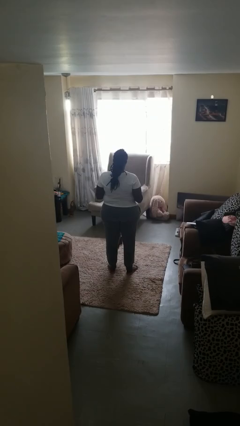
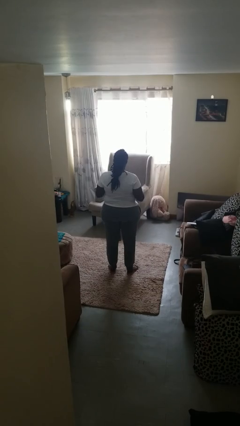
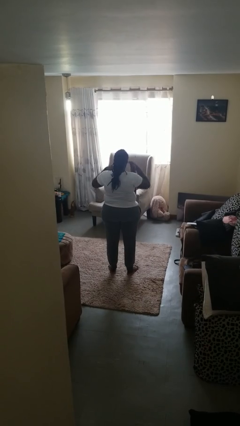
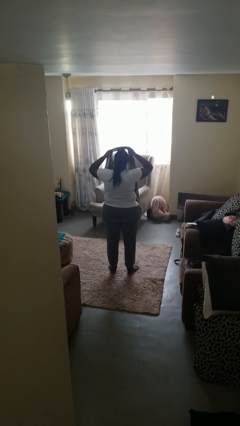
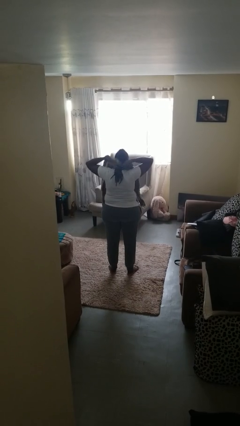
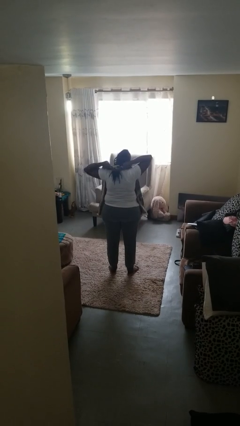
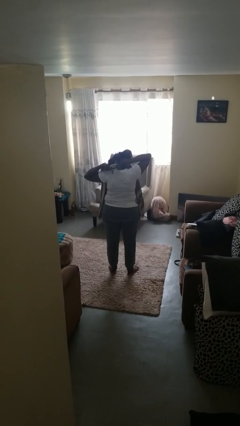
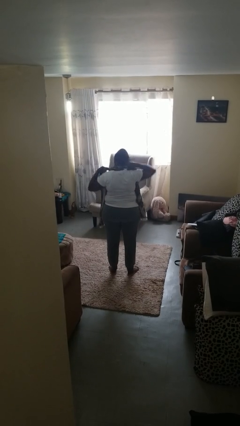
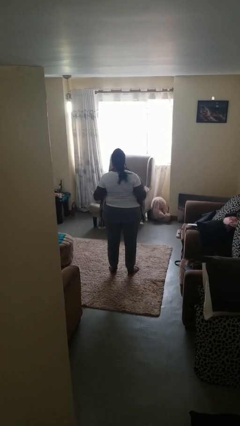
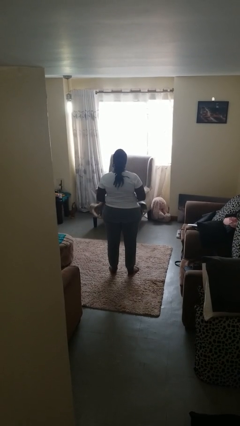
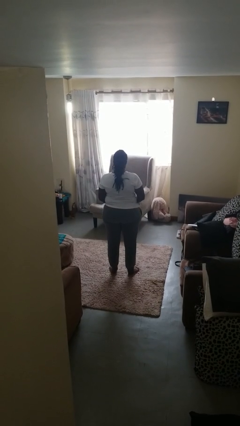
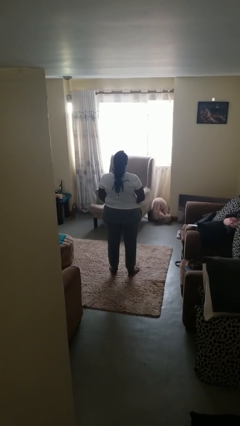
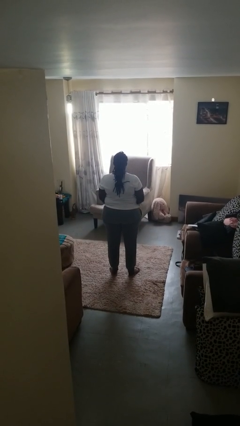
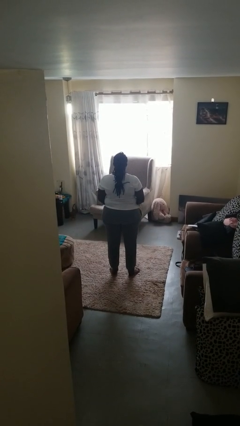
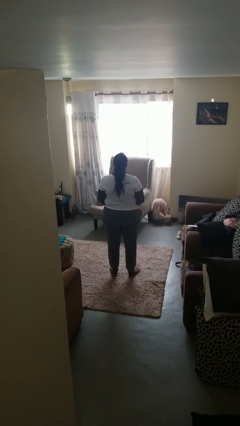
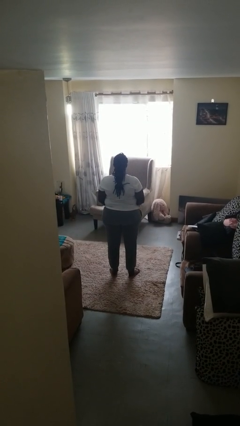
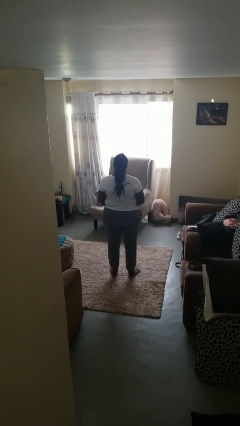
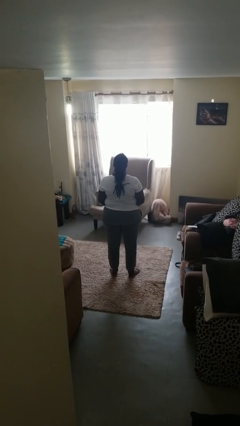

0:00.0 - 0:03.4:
person puts on scarf

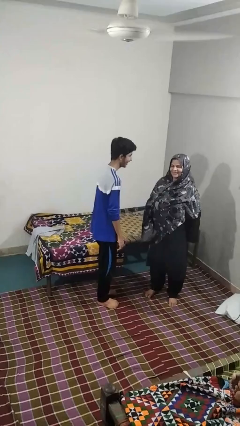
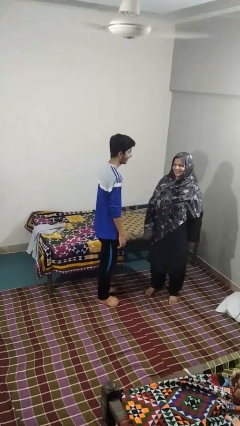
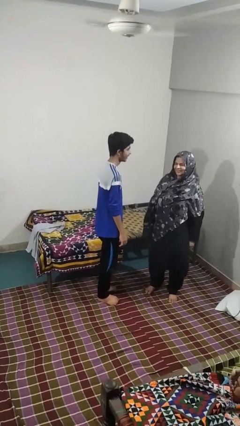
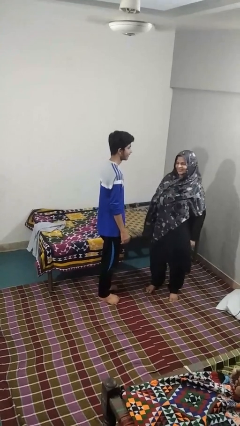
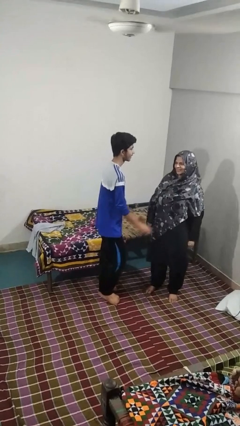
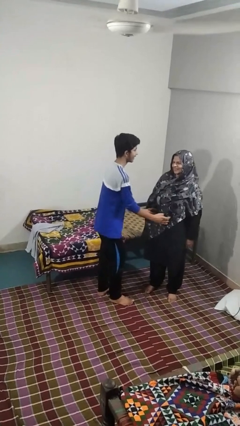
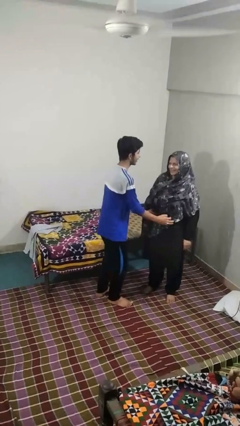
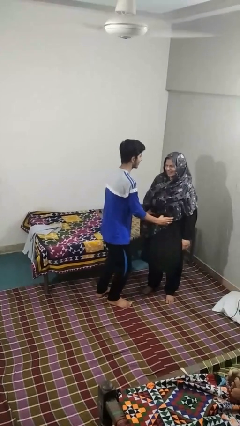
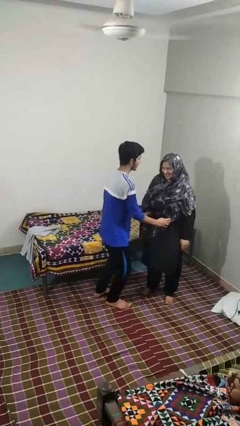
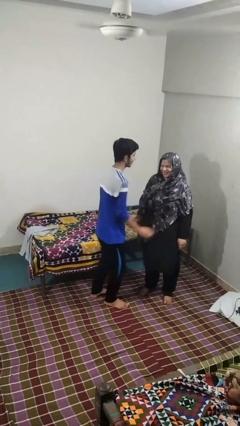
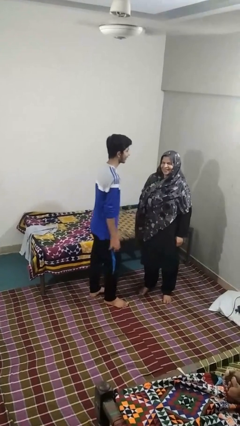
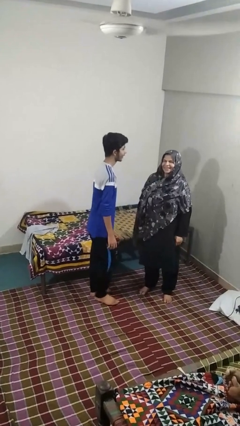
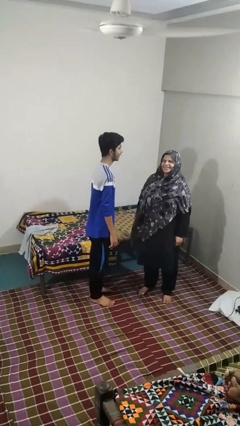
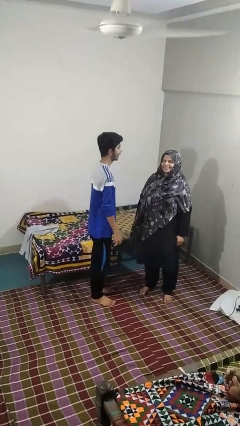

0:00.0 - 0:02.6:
person tickles person

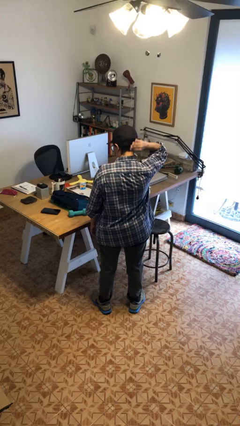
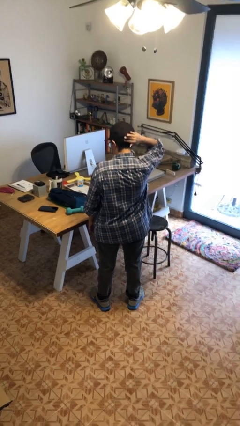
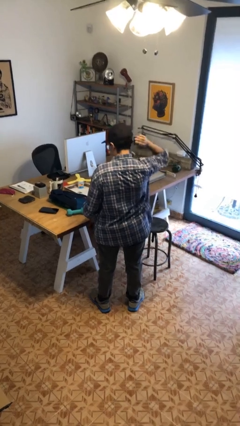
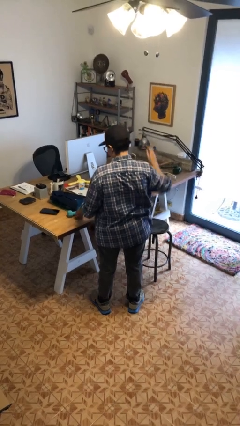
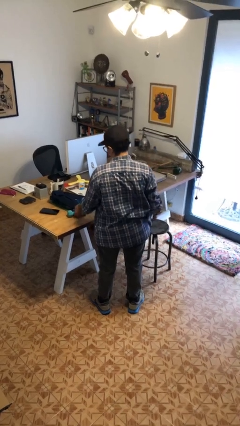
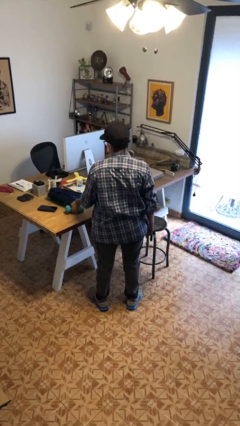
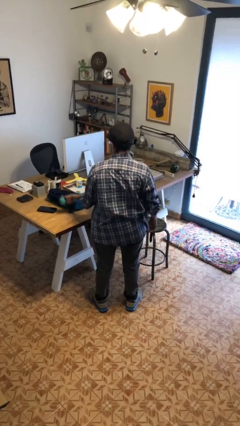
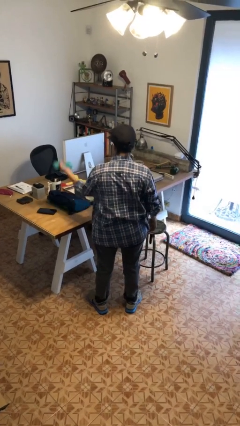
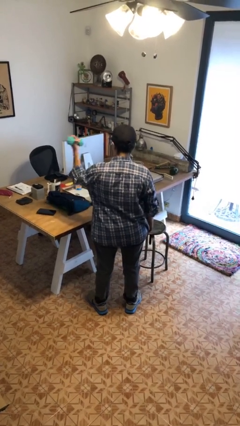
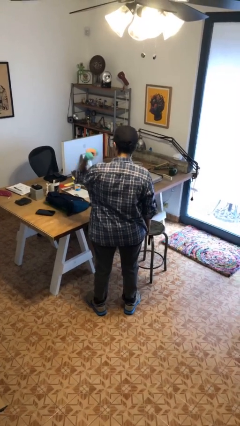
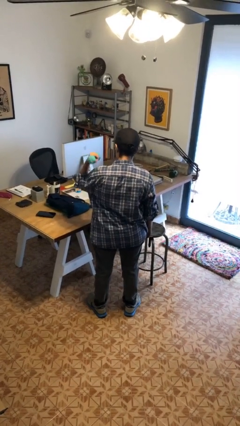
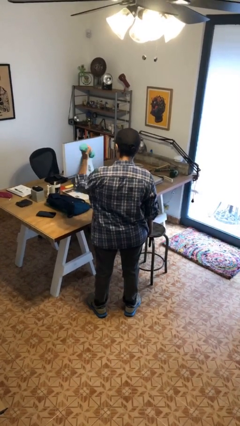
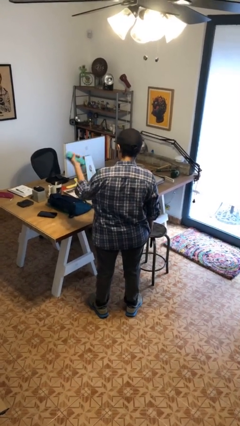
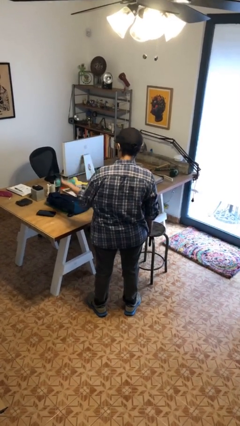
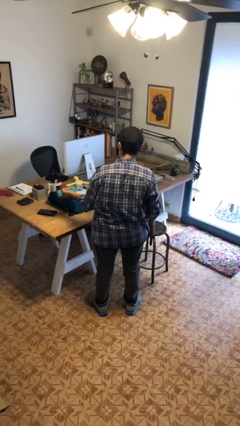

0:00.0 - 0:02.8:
person lifts dumbbells

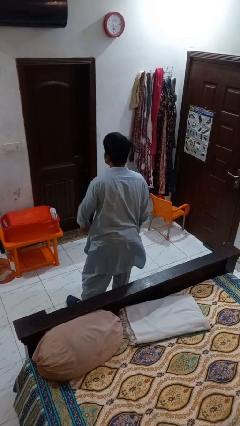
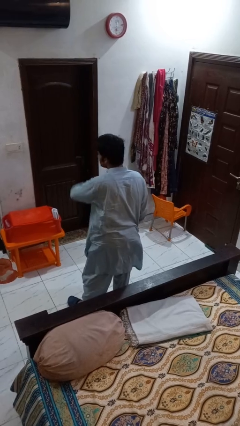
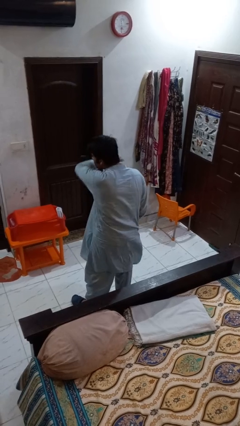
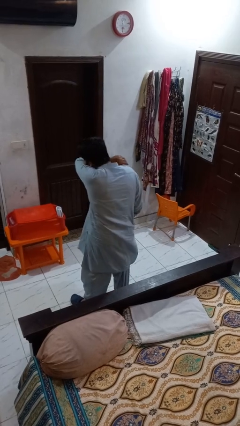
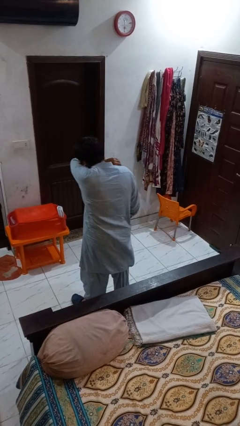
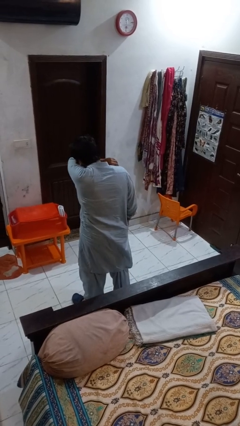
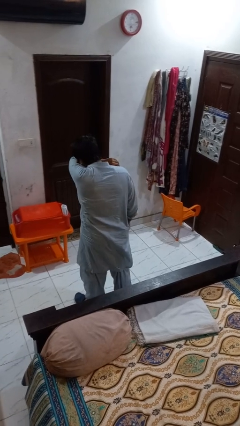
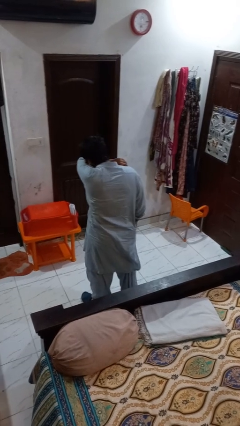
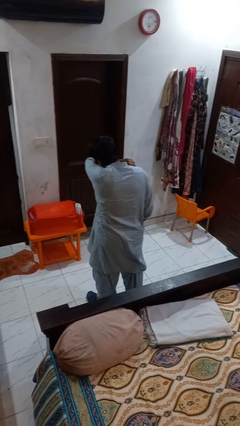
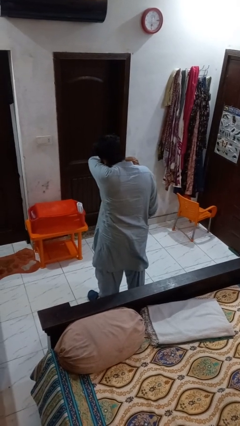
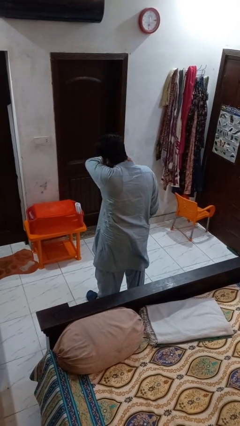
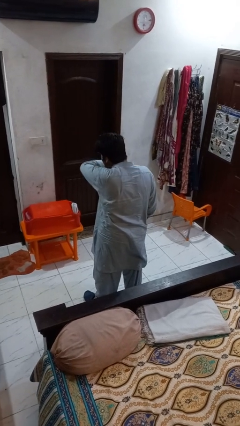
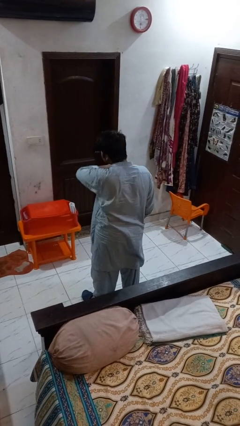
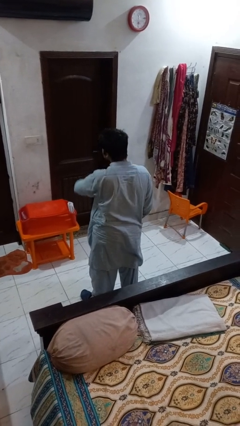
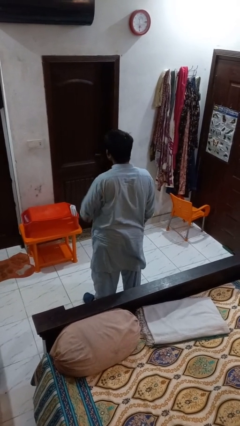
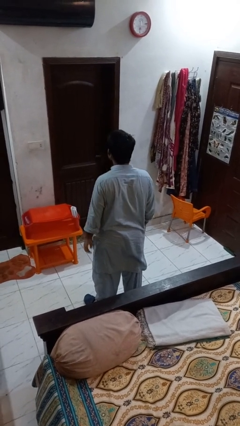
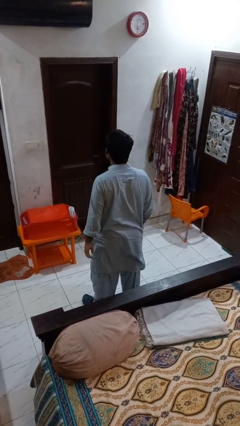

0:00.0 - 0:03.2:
person sneezes into arm

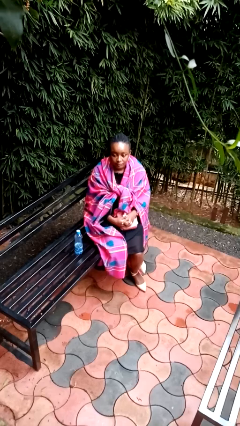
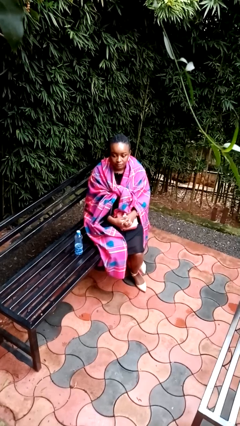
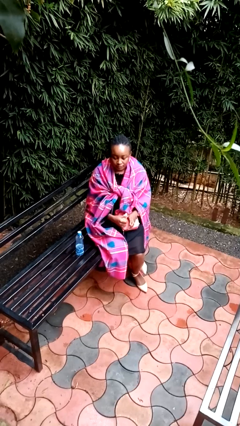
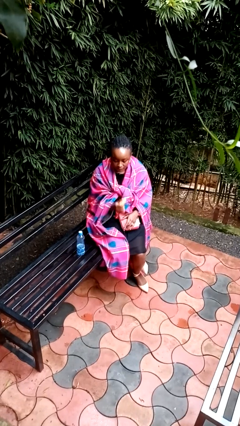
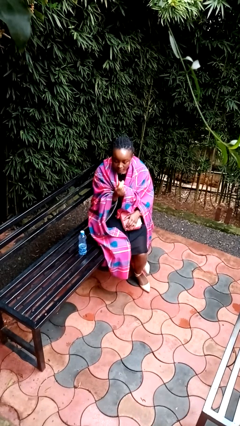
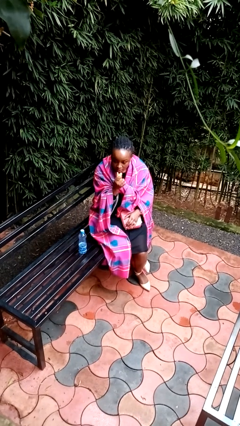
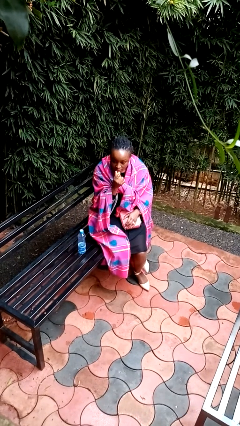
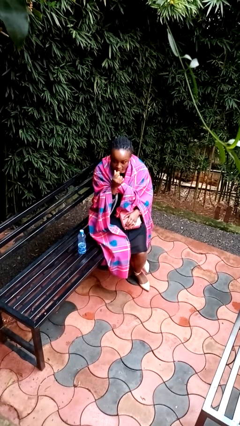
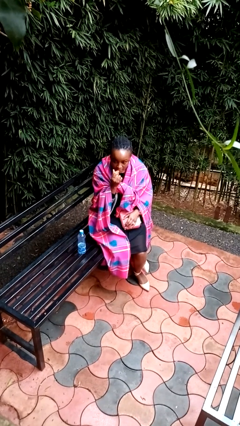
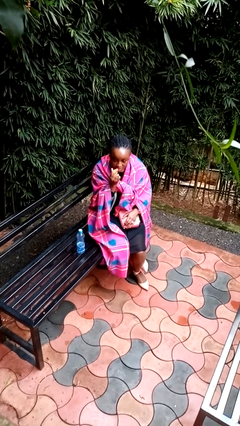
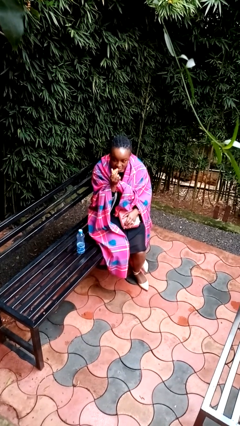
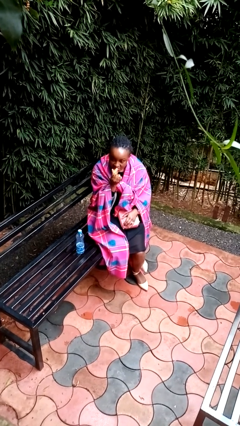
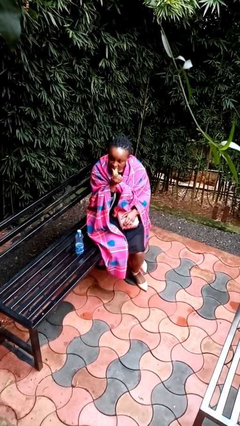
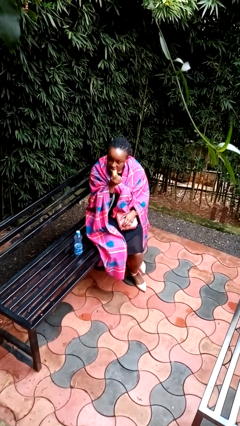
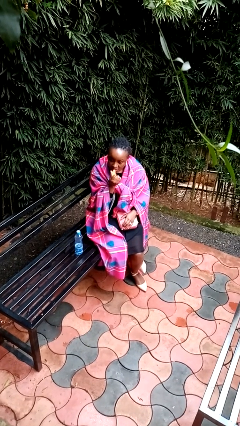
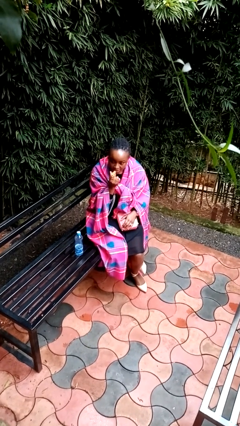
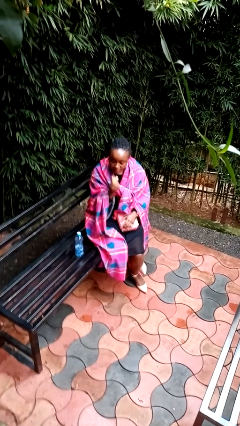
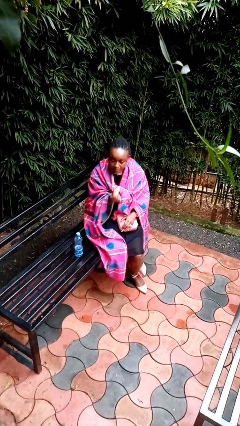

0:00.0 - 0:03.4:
person applies lip makeup

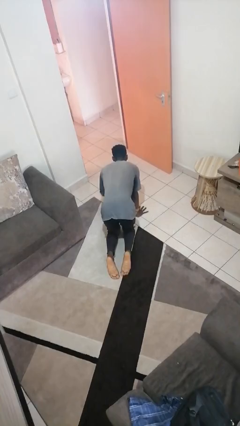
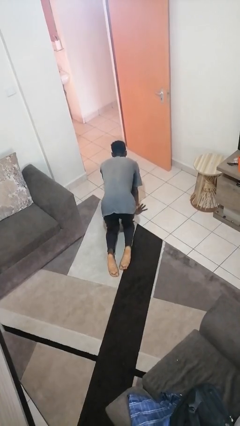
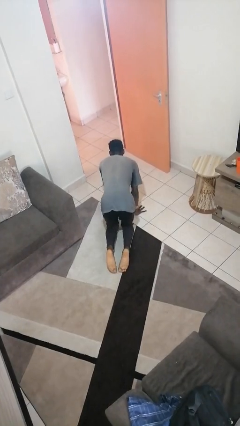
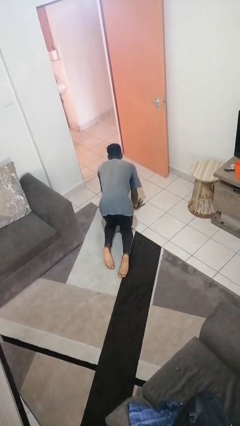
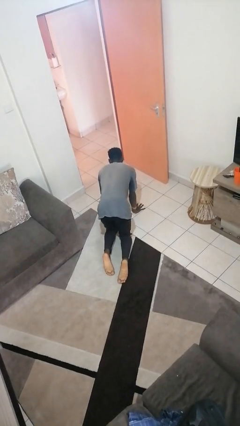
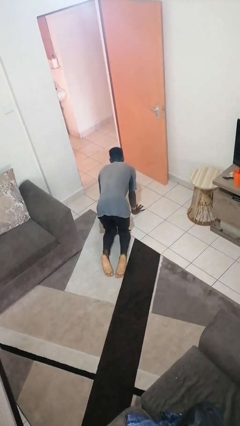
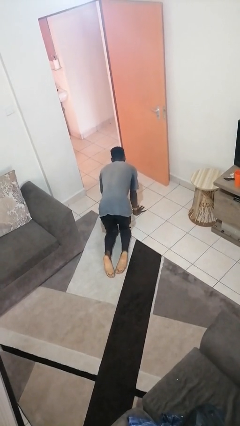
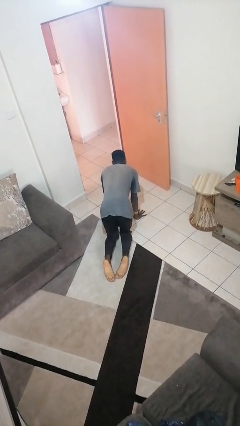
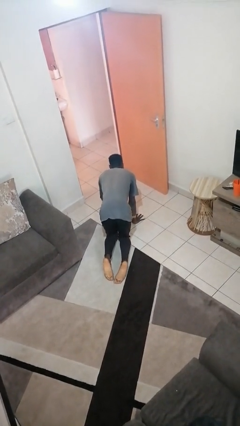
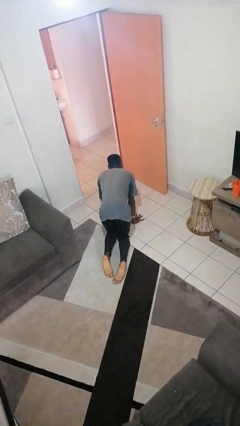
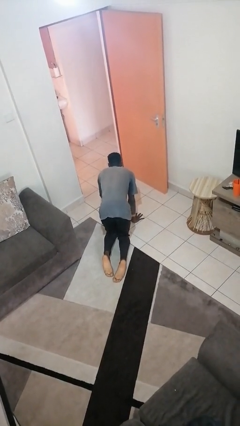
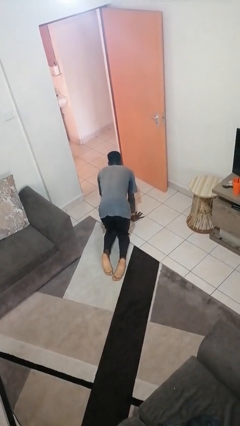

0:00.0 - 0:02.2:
person crawls
